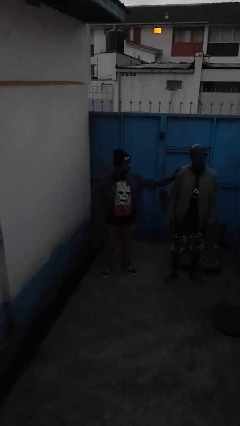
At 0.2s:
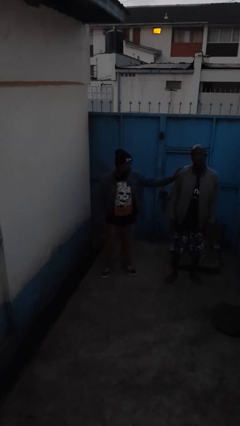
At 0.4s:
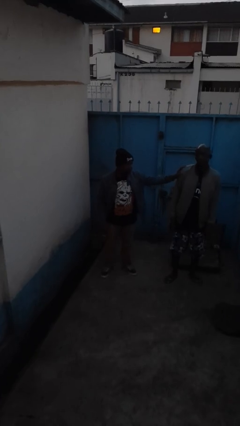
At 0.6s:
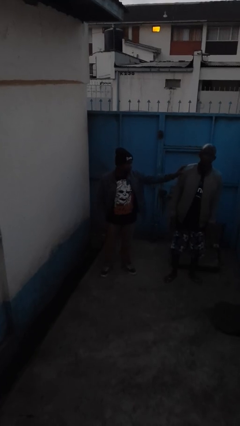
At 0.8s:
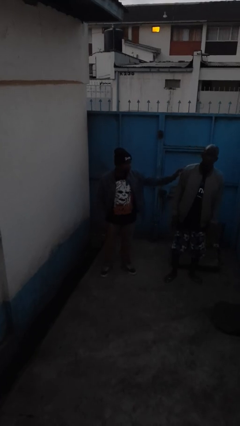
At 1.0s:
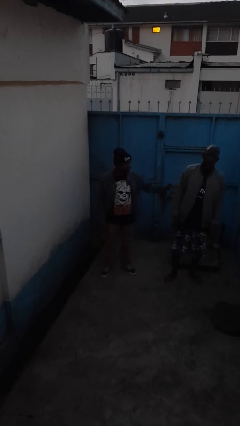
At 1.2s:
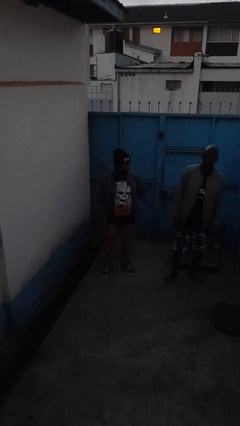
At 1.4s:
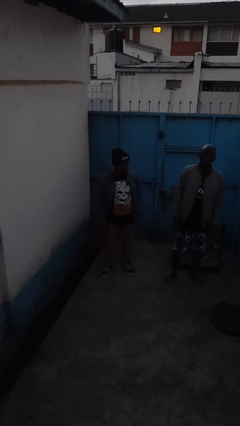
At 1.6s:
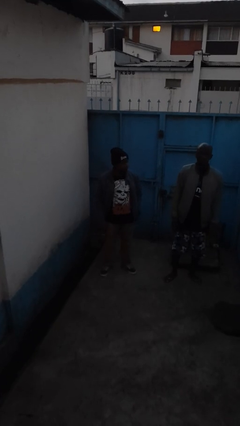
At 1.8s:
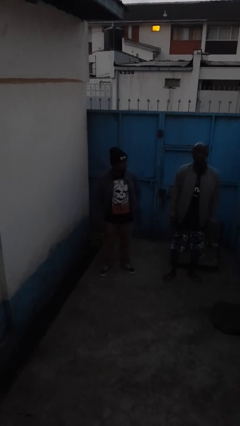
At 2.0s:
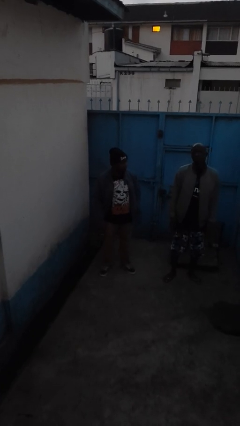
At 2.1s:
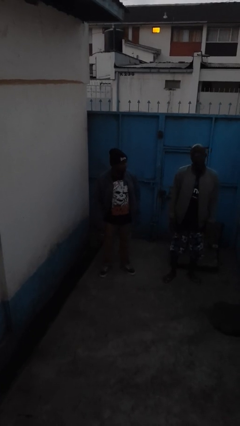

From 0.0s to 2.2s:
person shoves person

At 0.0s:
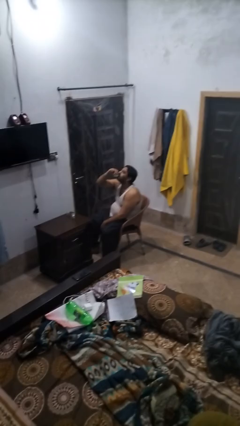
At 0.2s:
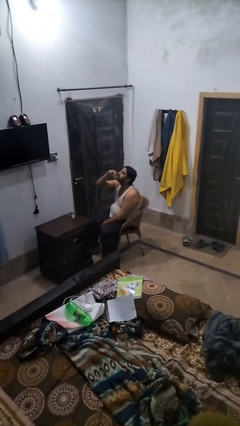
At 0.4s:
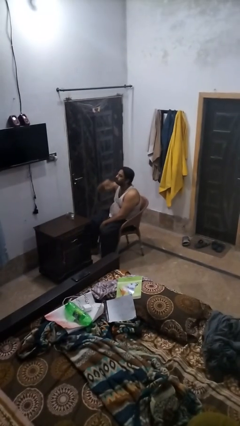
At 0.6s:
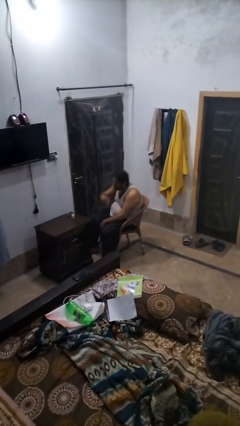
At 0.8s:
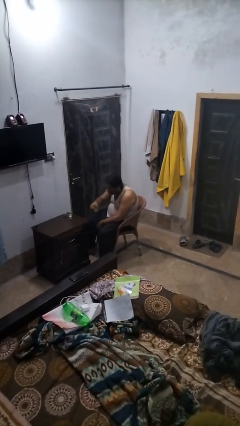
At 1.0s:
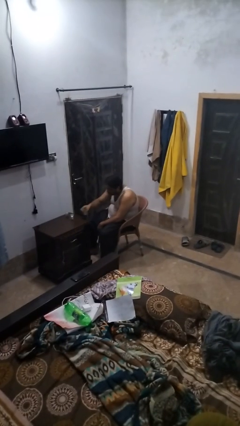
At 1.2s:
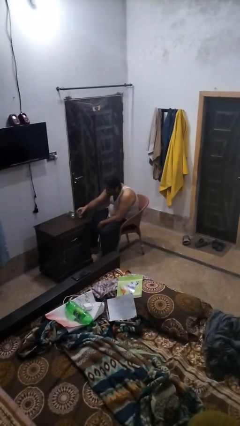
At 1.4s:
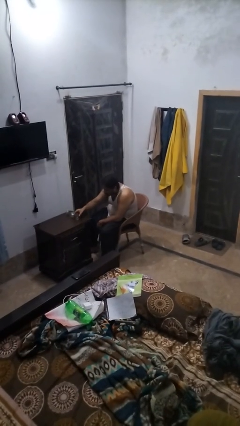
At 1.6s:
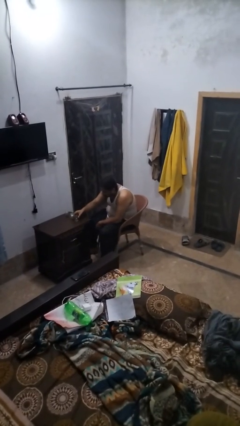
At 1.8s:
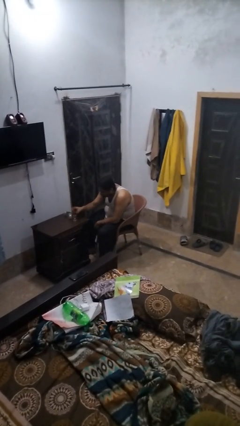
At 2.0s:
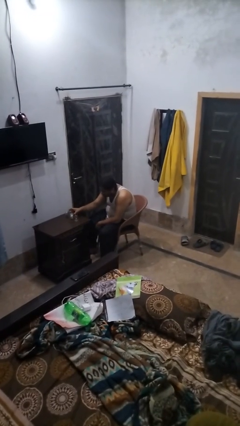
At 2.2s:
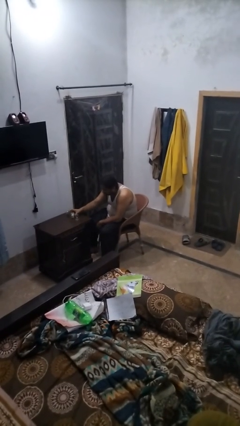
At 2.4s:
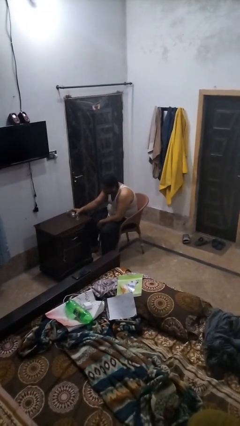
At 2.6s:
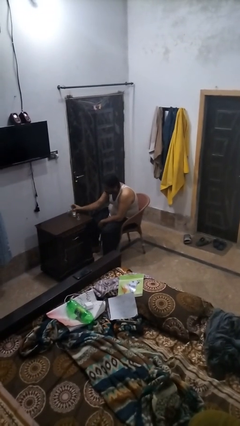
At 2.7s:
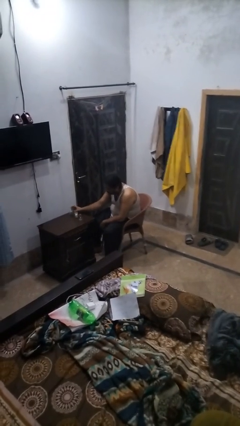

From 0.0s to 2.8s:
person puts down object on table

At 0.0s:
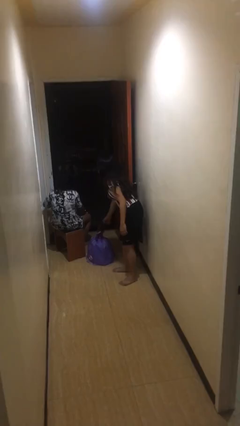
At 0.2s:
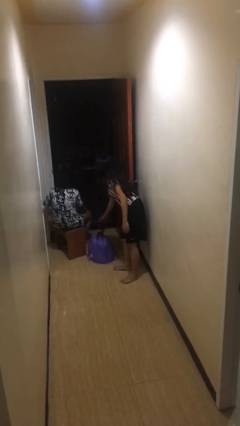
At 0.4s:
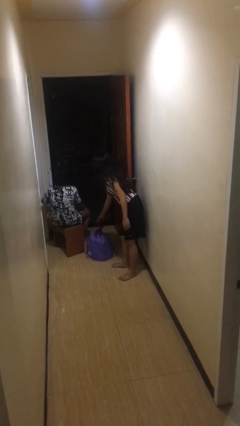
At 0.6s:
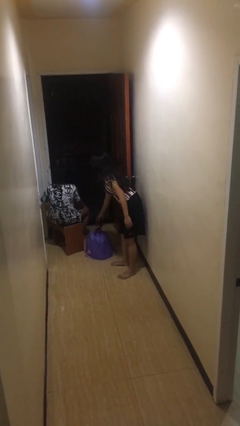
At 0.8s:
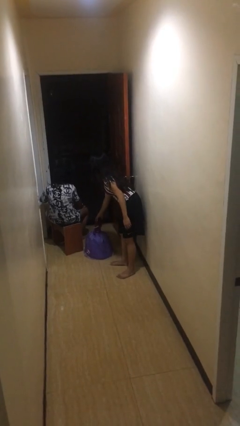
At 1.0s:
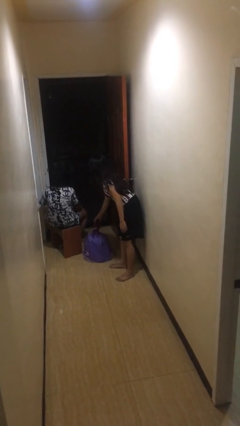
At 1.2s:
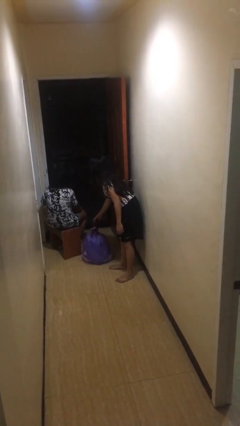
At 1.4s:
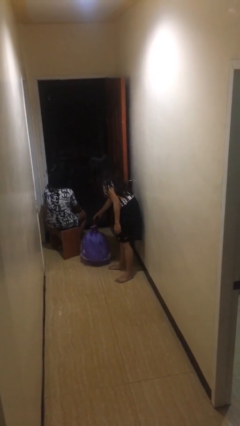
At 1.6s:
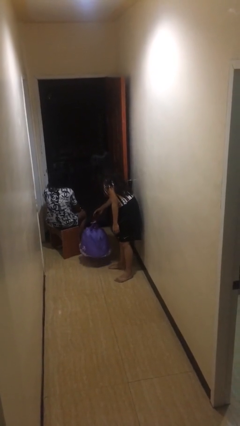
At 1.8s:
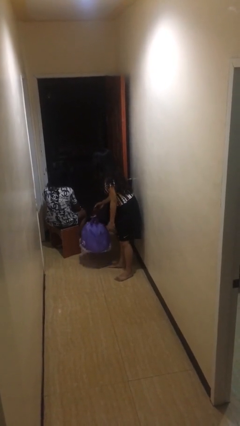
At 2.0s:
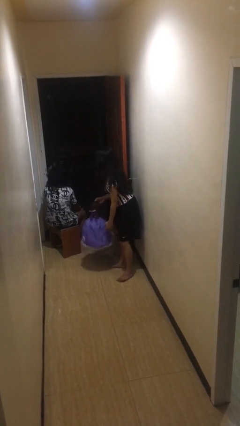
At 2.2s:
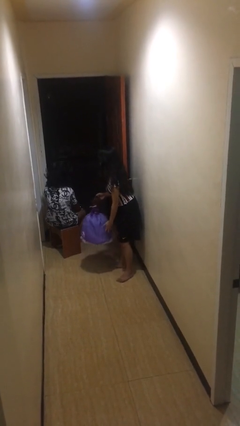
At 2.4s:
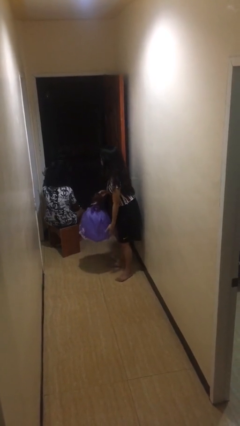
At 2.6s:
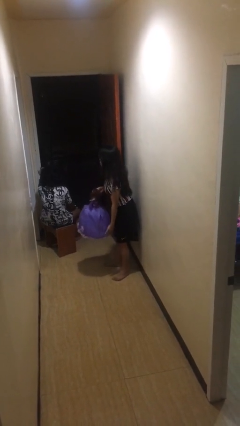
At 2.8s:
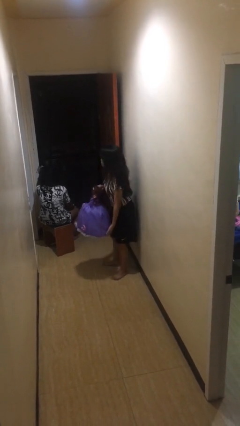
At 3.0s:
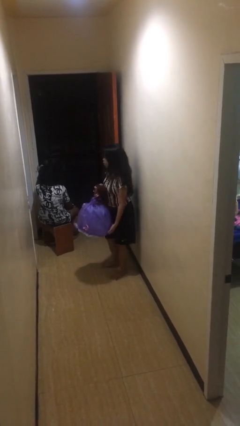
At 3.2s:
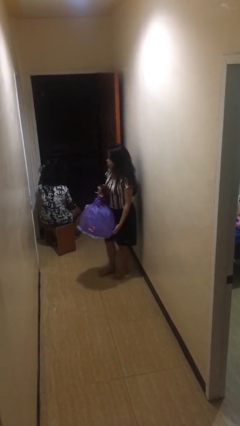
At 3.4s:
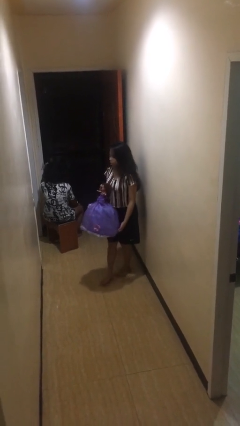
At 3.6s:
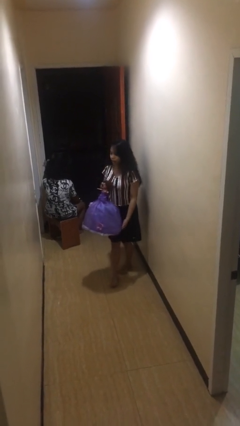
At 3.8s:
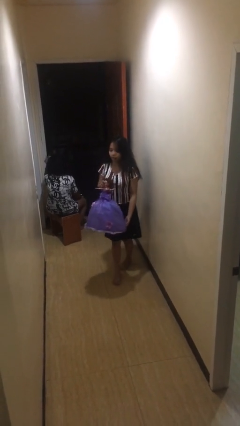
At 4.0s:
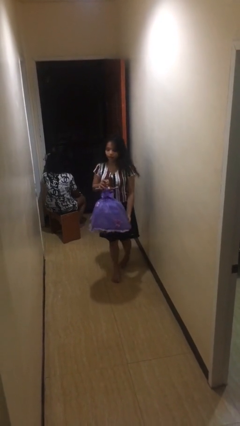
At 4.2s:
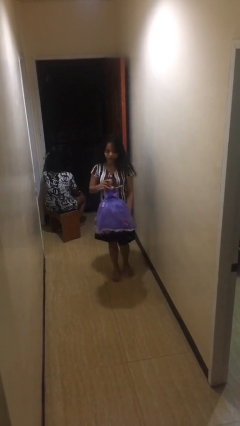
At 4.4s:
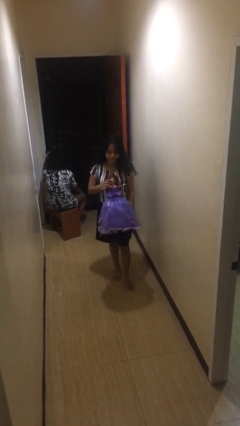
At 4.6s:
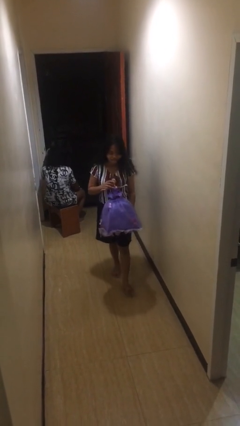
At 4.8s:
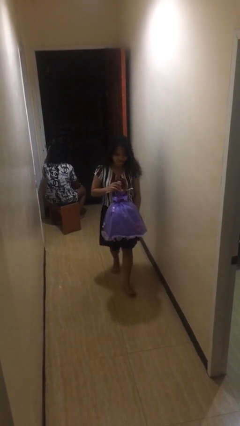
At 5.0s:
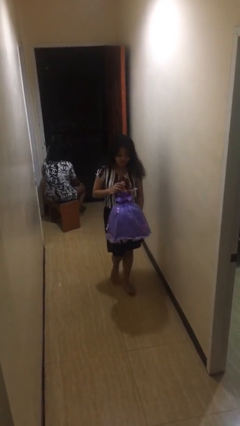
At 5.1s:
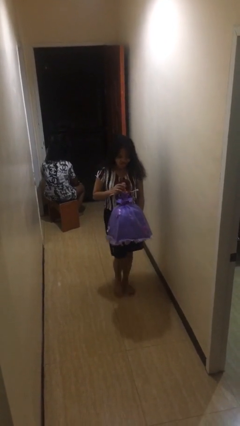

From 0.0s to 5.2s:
person steals object from person

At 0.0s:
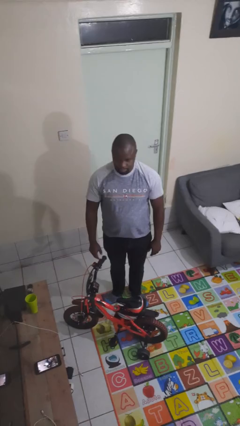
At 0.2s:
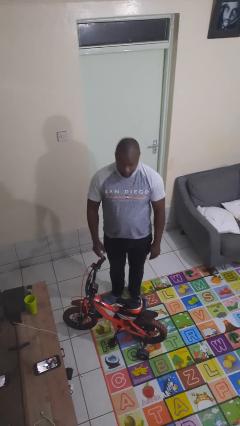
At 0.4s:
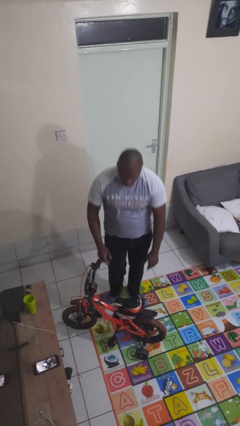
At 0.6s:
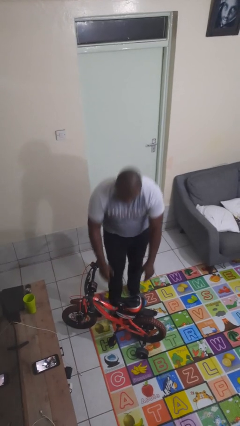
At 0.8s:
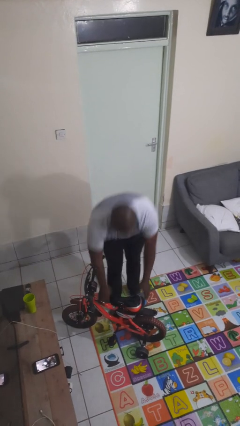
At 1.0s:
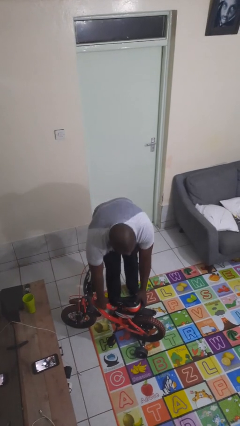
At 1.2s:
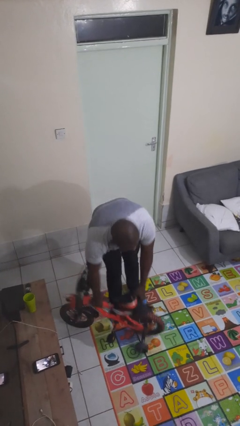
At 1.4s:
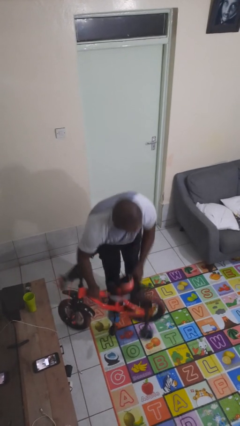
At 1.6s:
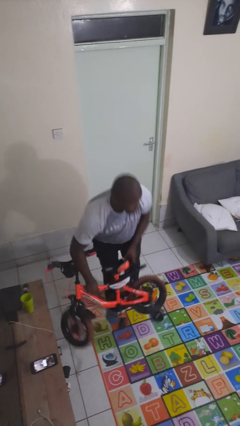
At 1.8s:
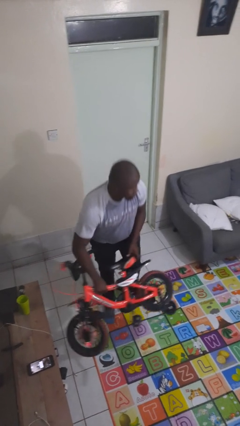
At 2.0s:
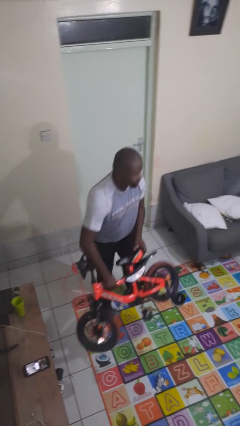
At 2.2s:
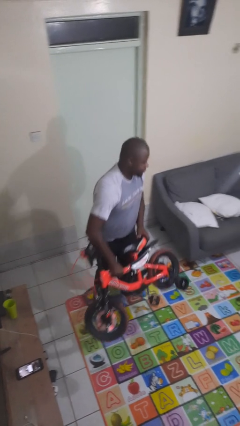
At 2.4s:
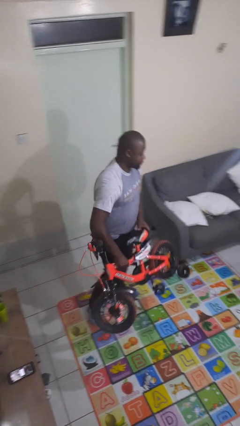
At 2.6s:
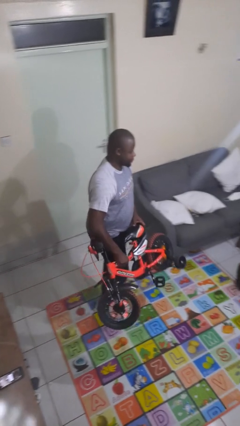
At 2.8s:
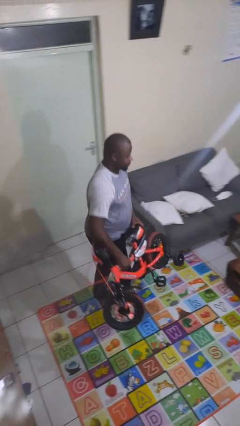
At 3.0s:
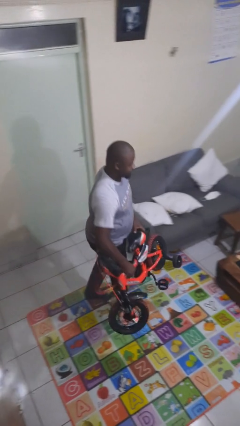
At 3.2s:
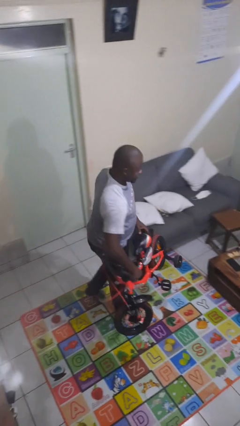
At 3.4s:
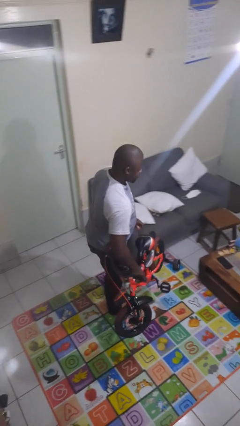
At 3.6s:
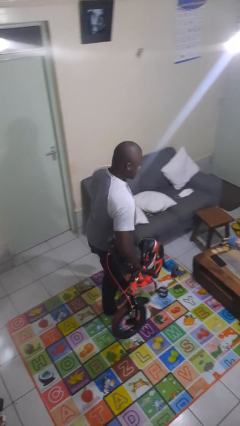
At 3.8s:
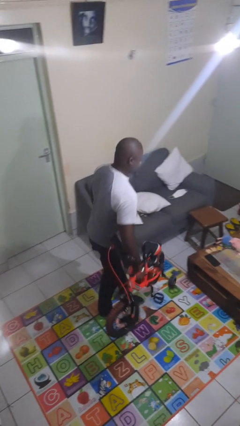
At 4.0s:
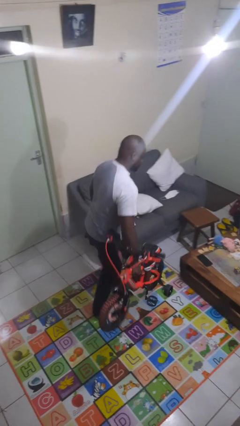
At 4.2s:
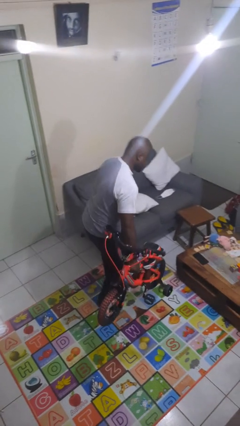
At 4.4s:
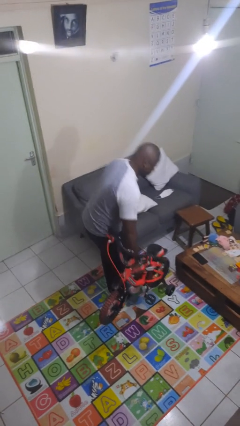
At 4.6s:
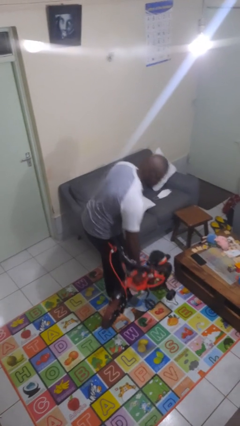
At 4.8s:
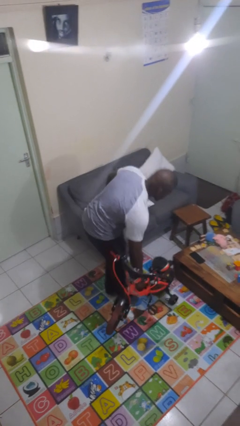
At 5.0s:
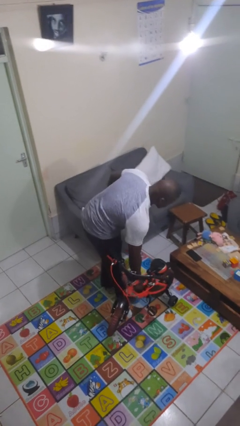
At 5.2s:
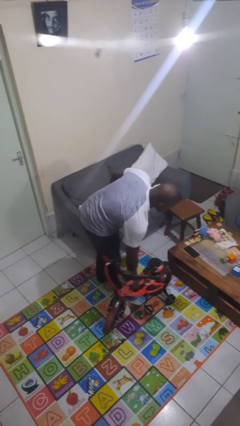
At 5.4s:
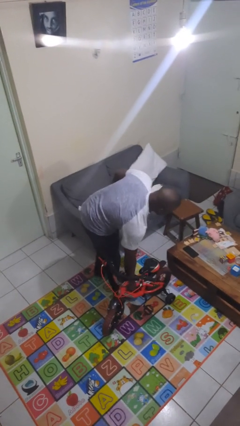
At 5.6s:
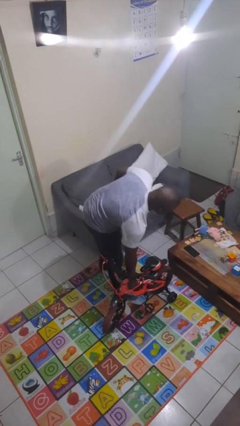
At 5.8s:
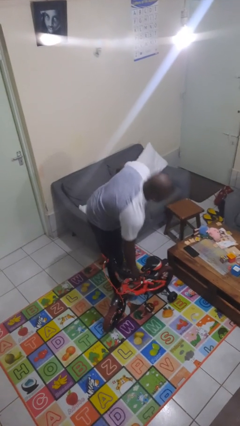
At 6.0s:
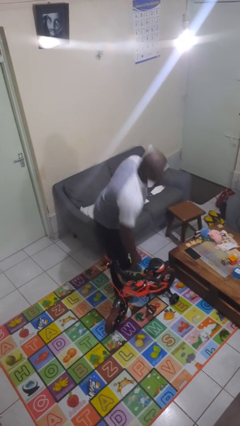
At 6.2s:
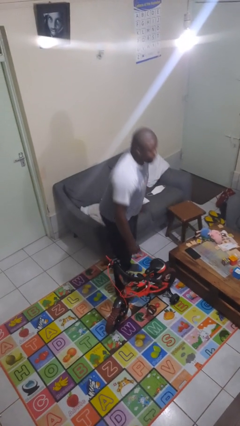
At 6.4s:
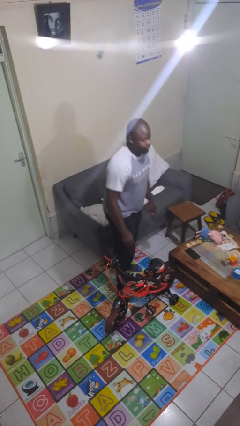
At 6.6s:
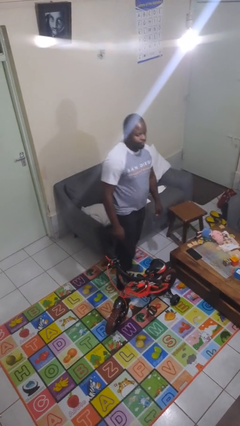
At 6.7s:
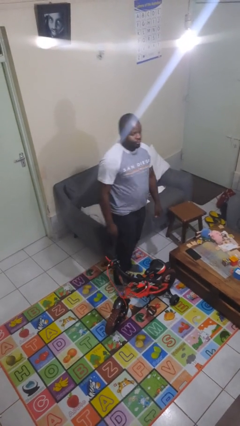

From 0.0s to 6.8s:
person carries bicycle

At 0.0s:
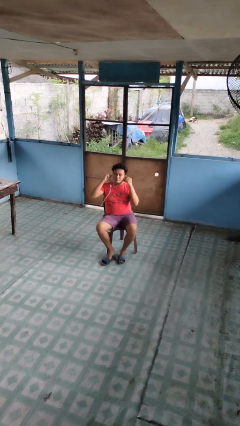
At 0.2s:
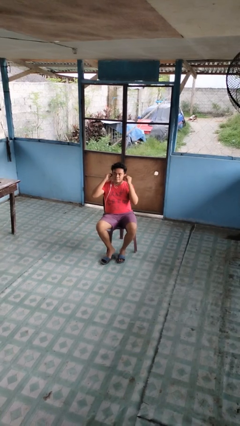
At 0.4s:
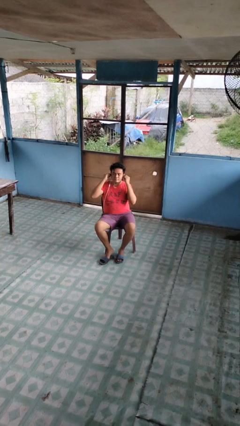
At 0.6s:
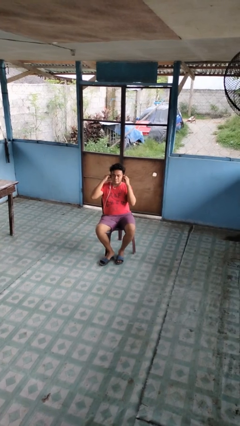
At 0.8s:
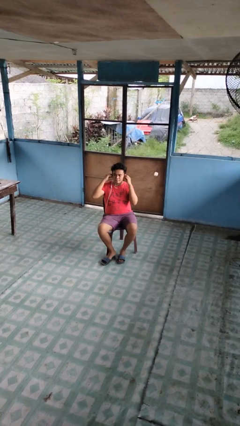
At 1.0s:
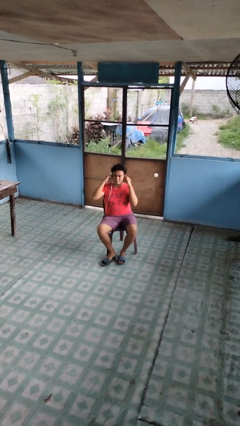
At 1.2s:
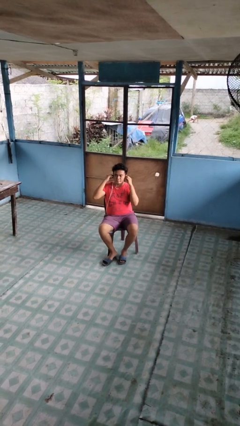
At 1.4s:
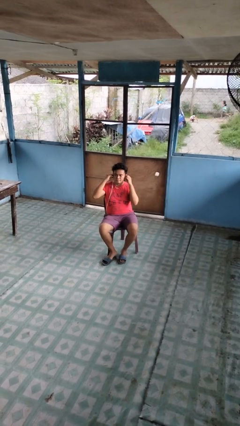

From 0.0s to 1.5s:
person puts on headphones
